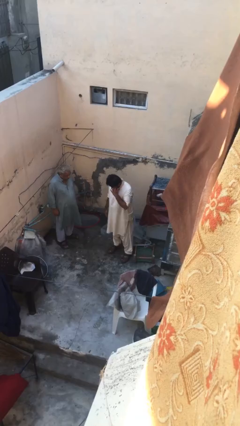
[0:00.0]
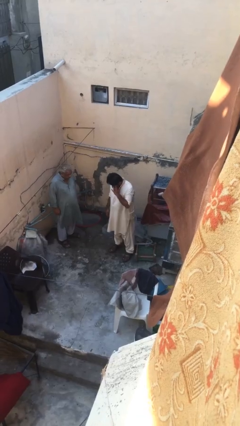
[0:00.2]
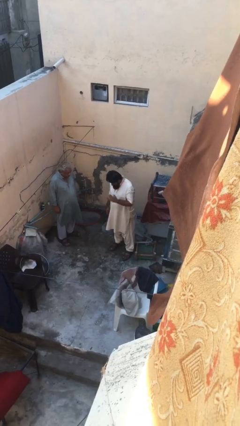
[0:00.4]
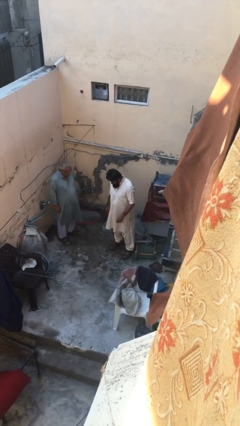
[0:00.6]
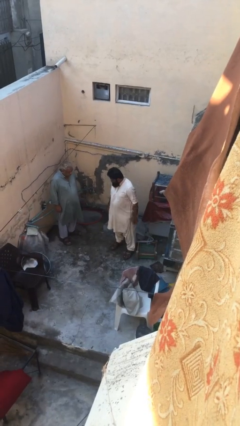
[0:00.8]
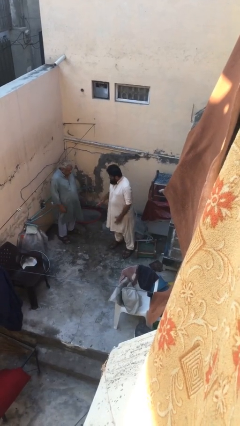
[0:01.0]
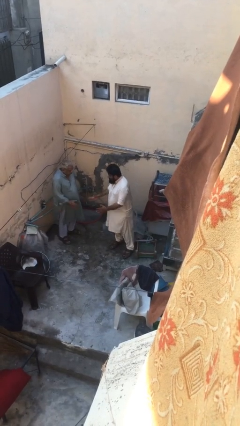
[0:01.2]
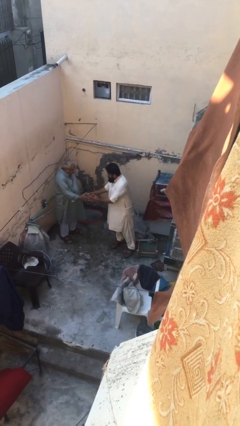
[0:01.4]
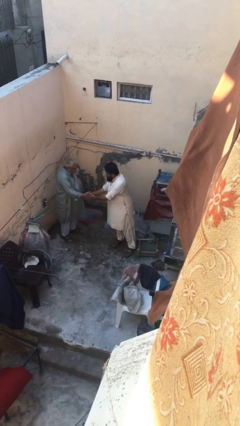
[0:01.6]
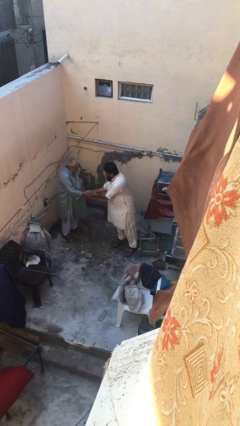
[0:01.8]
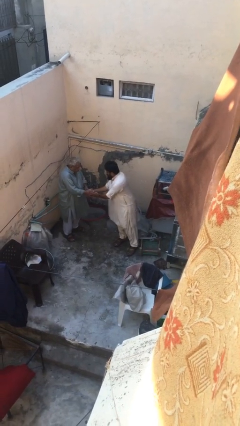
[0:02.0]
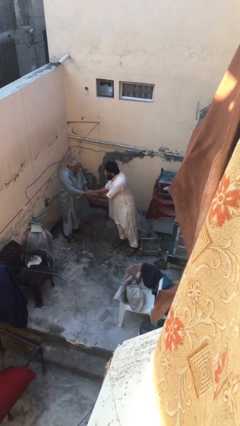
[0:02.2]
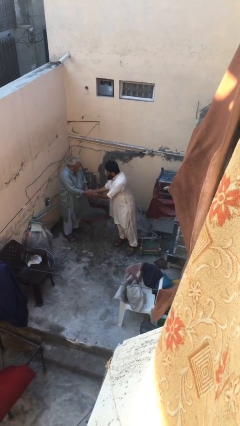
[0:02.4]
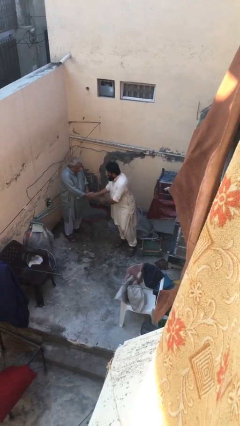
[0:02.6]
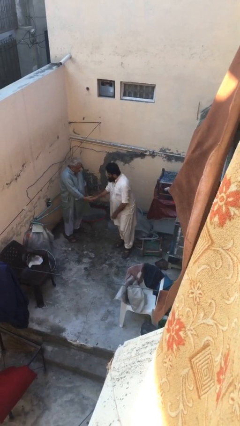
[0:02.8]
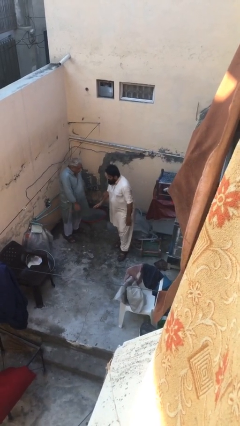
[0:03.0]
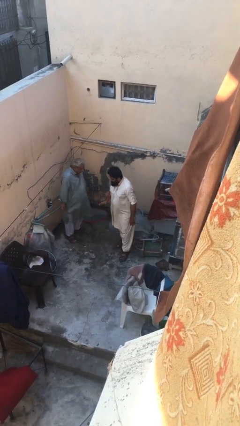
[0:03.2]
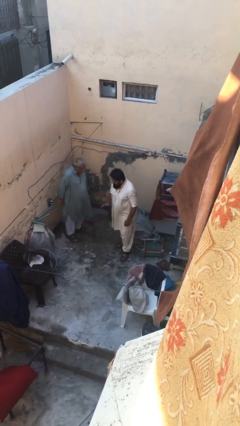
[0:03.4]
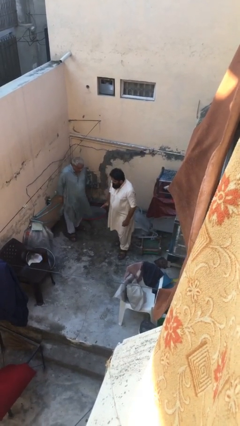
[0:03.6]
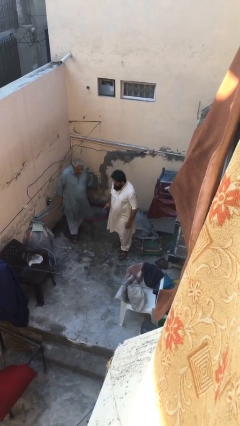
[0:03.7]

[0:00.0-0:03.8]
person shakes hand

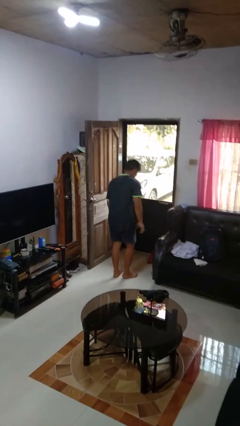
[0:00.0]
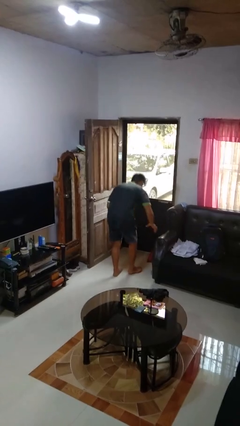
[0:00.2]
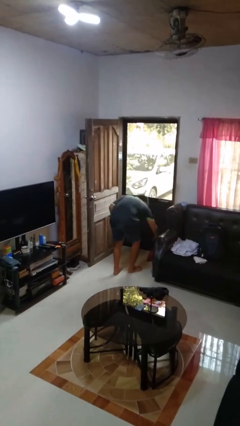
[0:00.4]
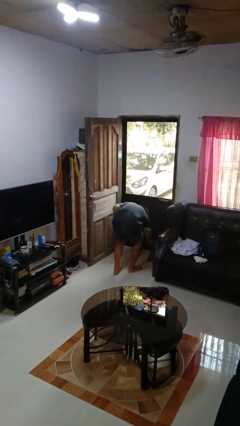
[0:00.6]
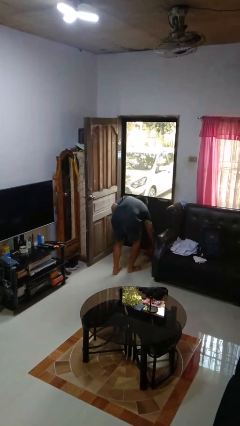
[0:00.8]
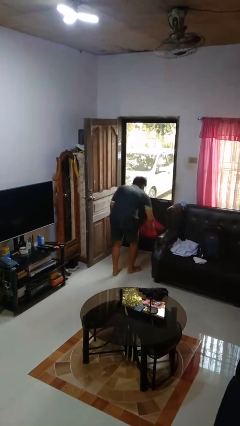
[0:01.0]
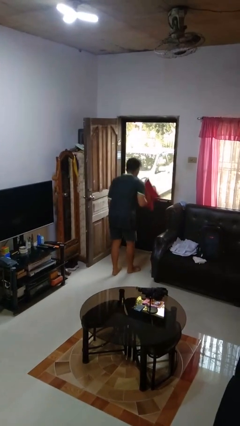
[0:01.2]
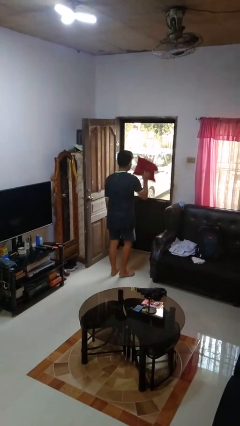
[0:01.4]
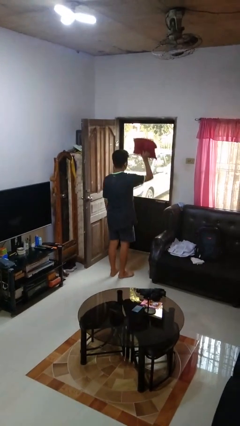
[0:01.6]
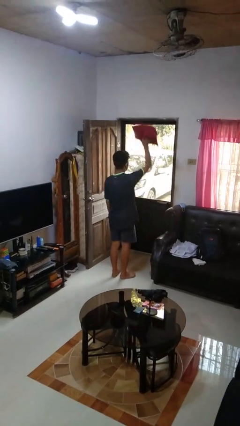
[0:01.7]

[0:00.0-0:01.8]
person picks up object from floor

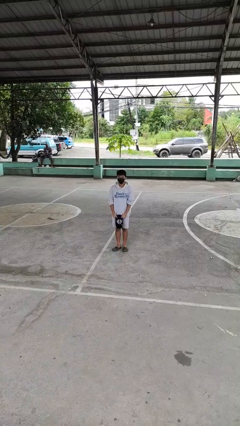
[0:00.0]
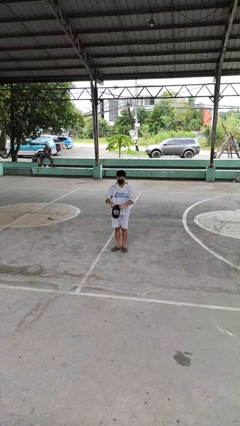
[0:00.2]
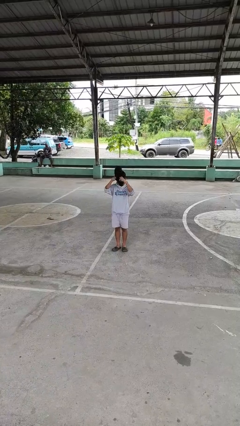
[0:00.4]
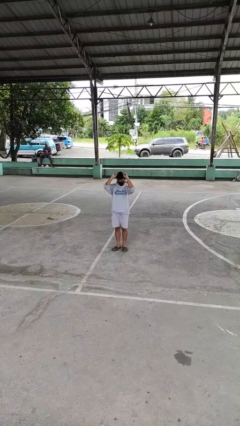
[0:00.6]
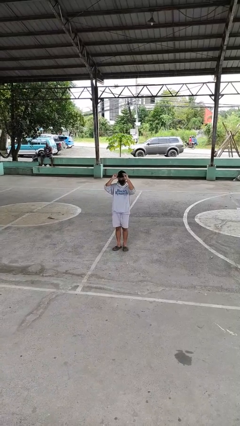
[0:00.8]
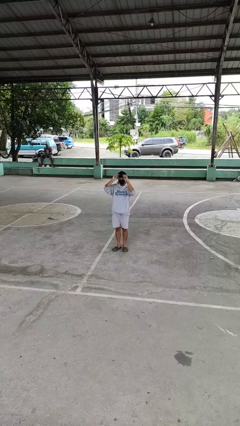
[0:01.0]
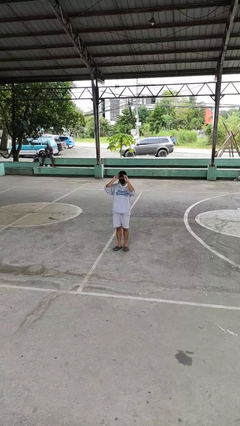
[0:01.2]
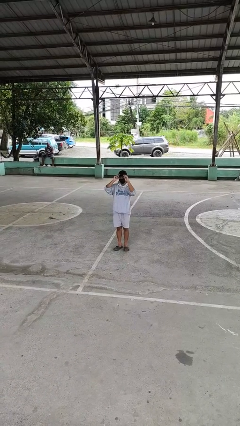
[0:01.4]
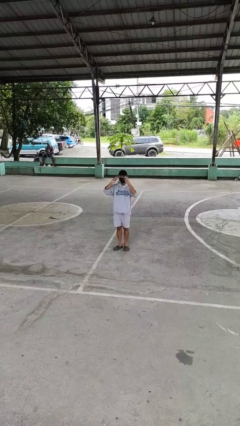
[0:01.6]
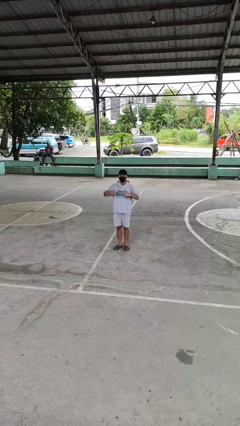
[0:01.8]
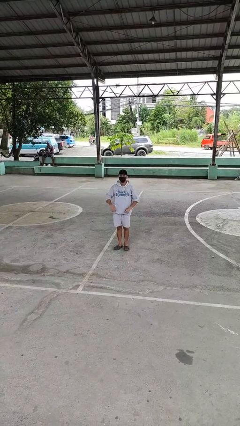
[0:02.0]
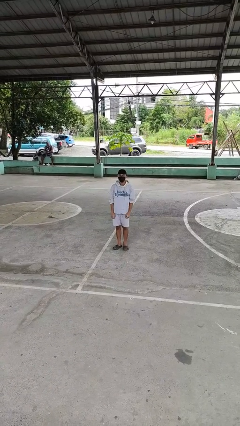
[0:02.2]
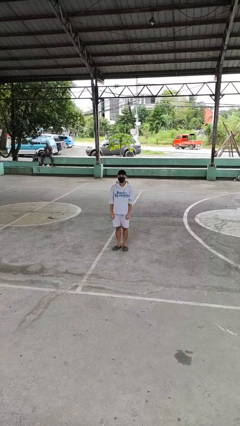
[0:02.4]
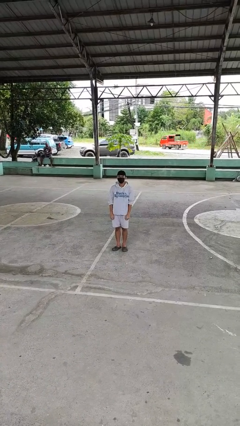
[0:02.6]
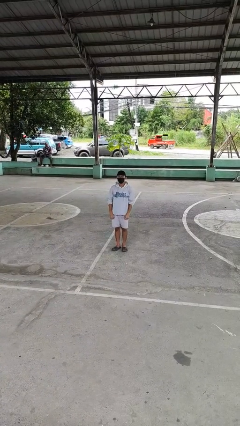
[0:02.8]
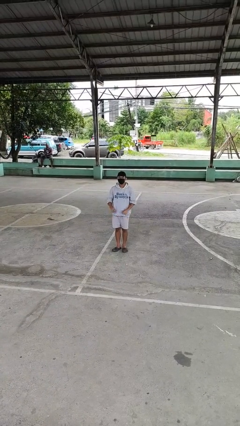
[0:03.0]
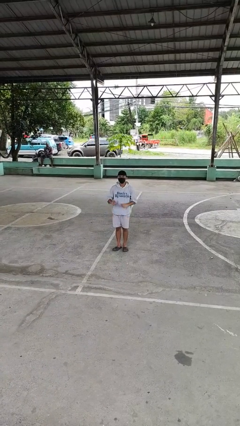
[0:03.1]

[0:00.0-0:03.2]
person puts on hat

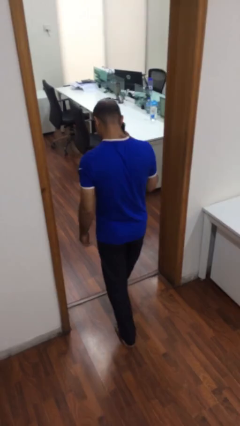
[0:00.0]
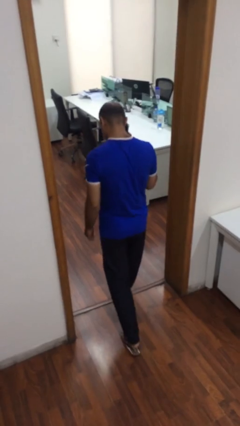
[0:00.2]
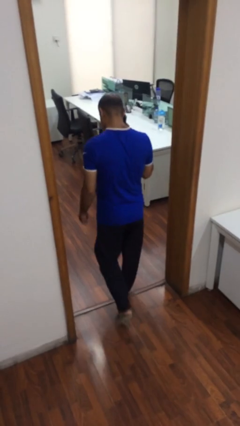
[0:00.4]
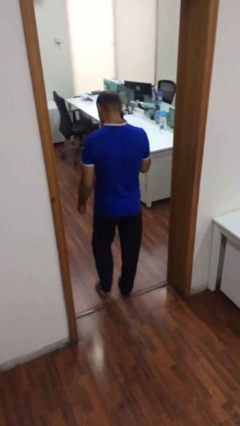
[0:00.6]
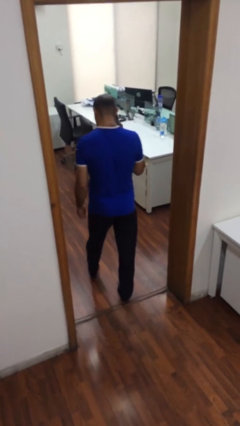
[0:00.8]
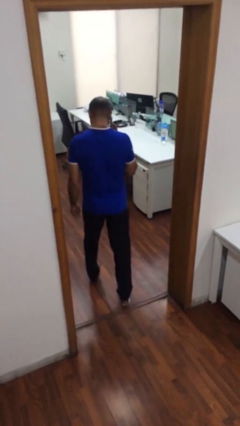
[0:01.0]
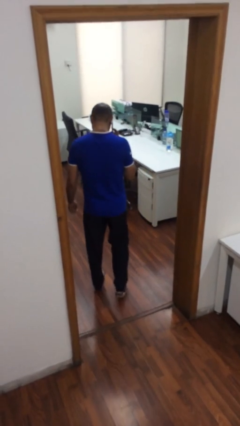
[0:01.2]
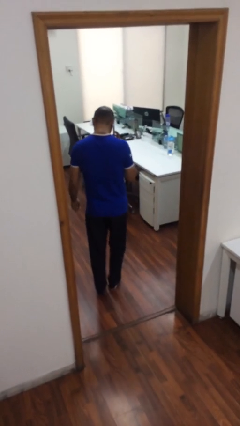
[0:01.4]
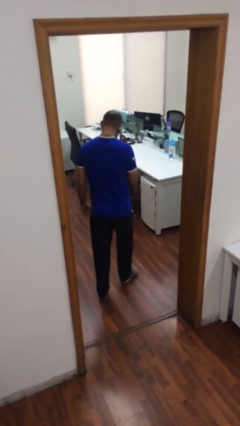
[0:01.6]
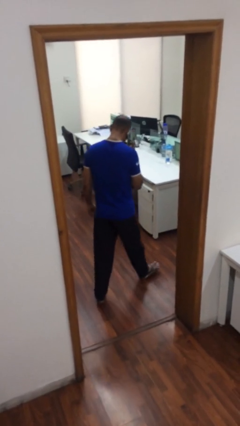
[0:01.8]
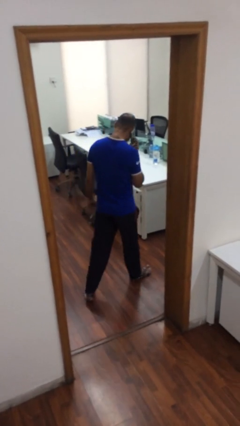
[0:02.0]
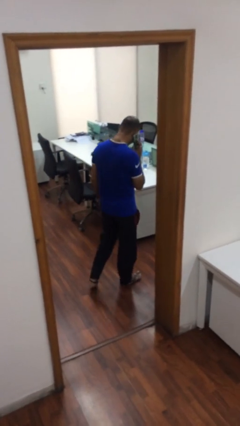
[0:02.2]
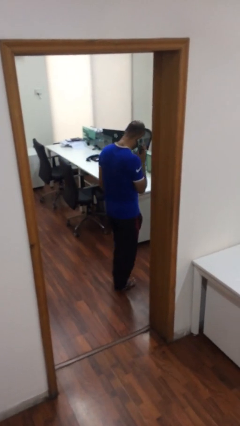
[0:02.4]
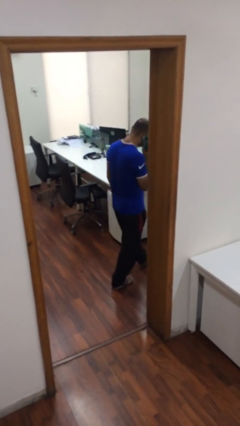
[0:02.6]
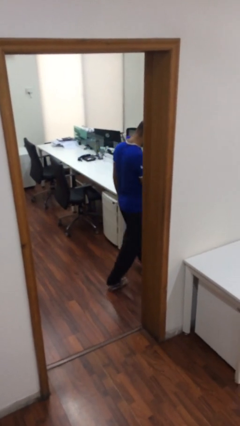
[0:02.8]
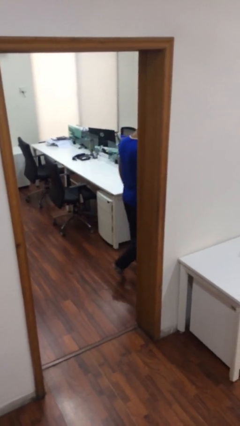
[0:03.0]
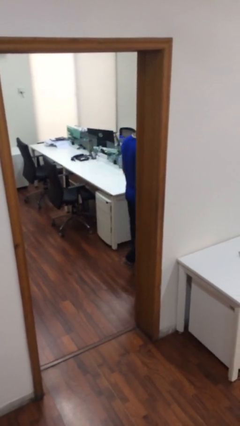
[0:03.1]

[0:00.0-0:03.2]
person exits scene through structure

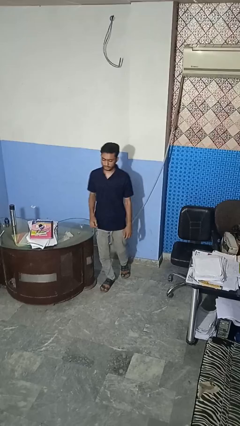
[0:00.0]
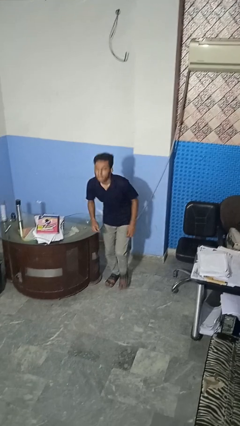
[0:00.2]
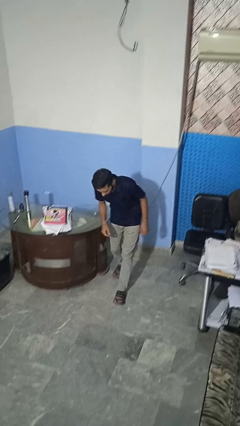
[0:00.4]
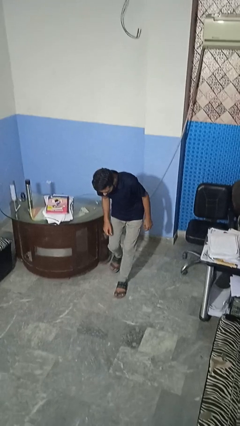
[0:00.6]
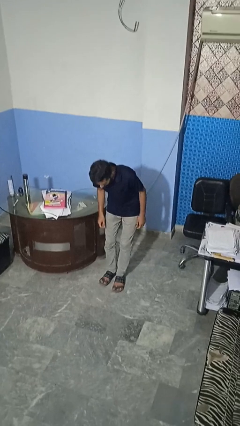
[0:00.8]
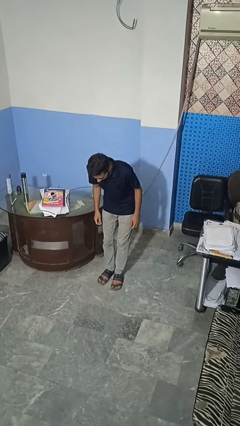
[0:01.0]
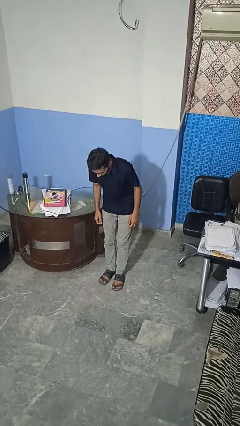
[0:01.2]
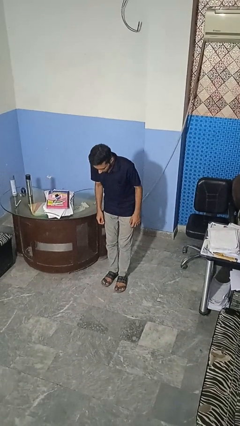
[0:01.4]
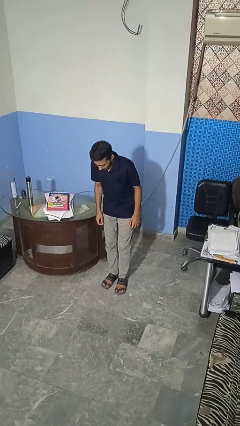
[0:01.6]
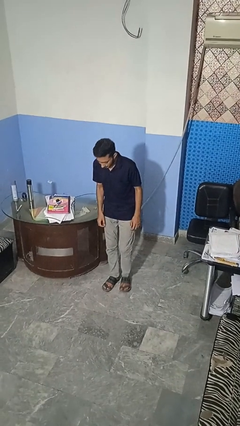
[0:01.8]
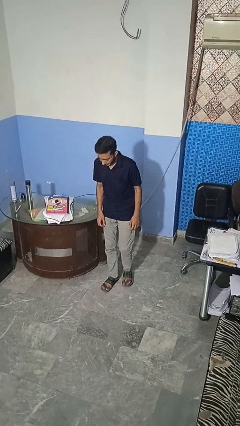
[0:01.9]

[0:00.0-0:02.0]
person bumps into table

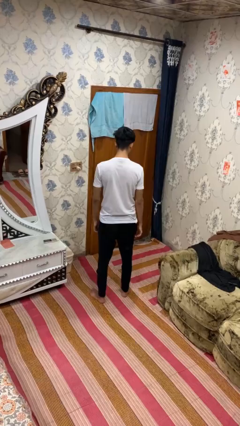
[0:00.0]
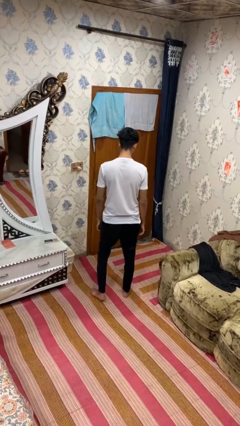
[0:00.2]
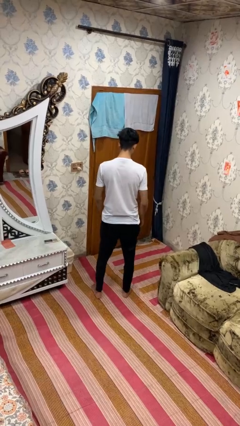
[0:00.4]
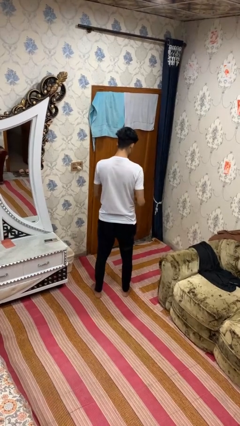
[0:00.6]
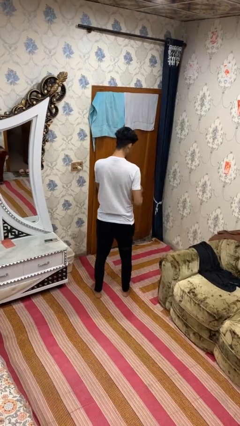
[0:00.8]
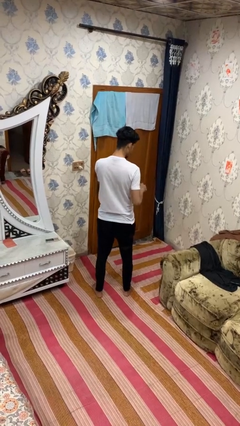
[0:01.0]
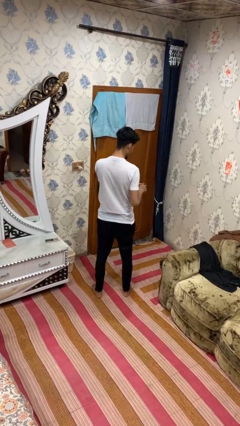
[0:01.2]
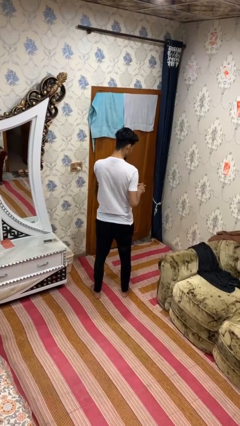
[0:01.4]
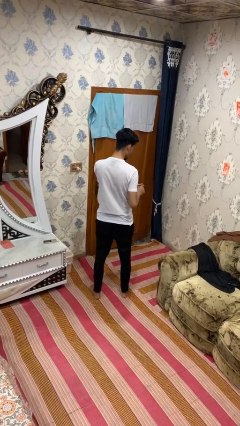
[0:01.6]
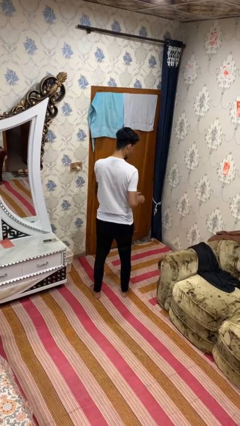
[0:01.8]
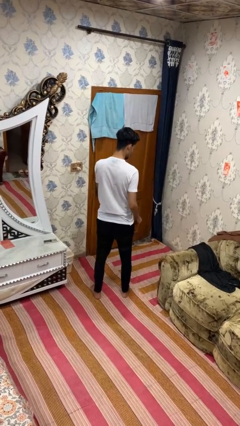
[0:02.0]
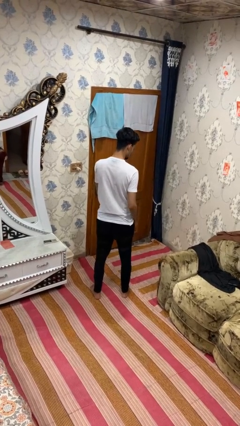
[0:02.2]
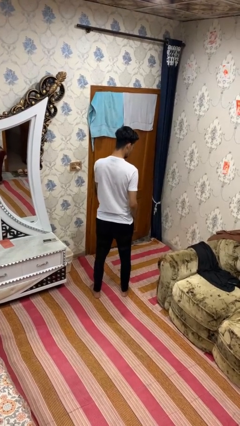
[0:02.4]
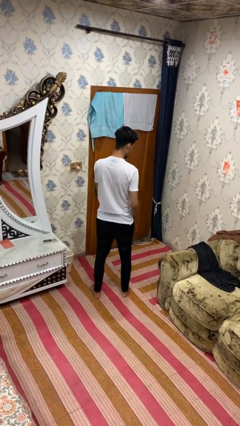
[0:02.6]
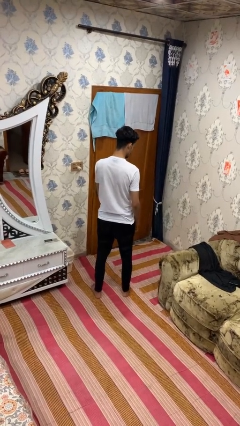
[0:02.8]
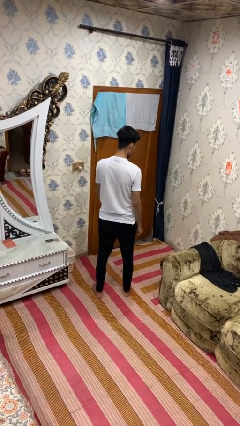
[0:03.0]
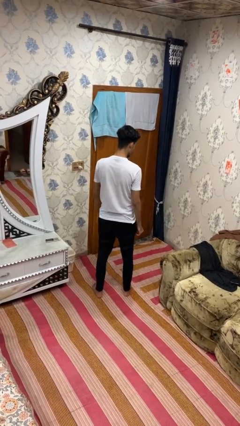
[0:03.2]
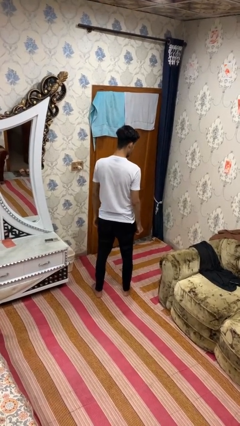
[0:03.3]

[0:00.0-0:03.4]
person takes off ring
